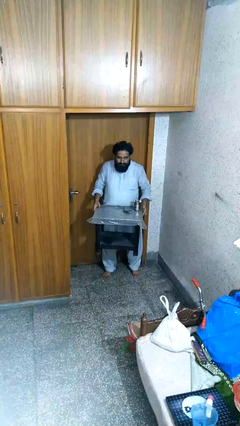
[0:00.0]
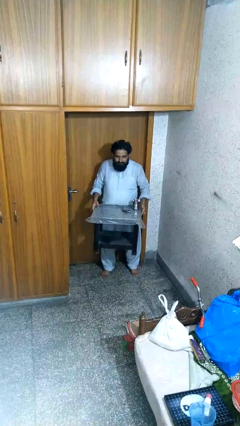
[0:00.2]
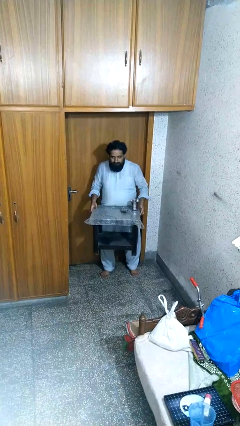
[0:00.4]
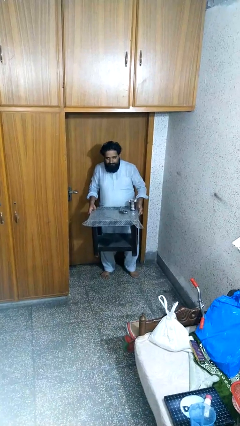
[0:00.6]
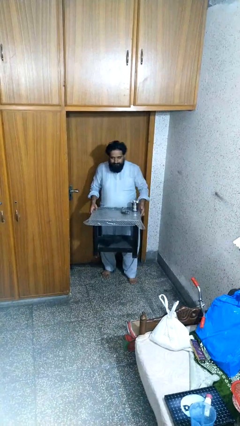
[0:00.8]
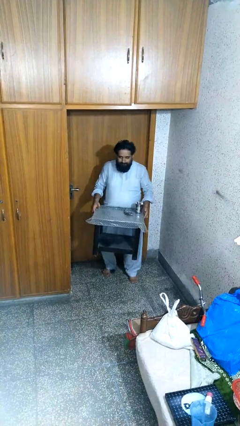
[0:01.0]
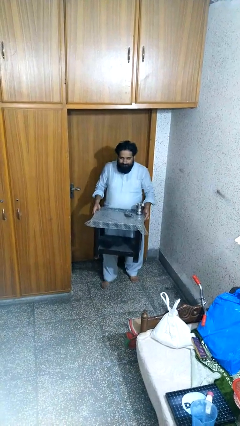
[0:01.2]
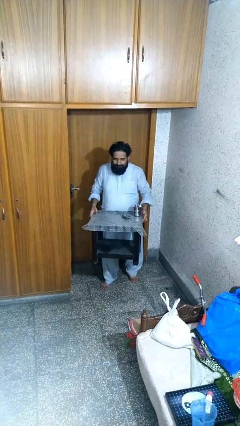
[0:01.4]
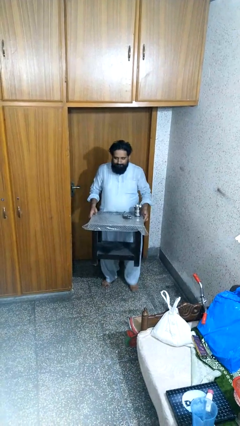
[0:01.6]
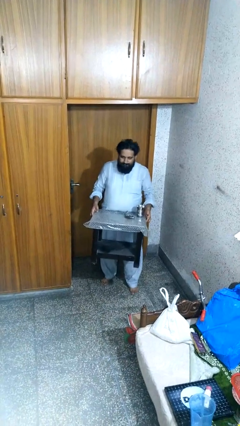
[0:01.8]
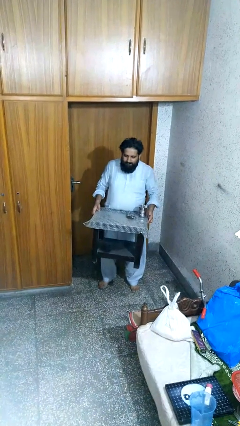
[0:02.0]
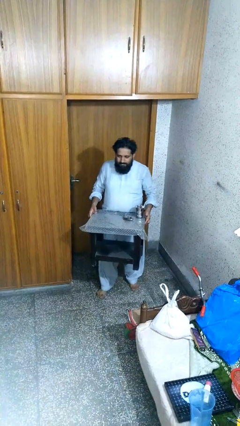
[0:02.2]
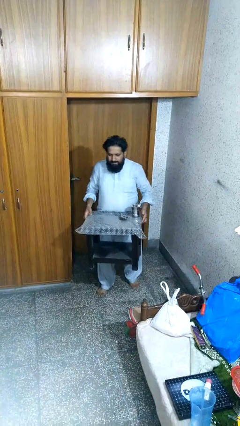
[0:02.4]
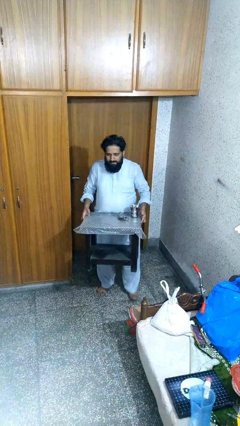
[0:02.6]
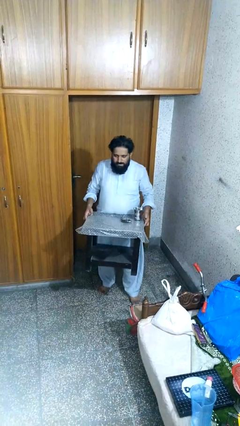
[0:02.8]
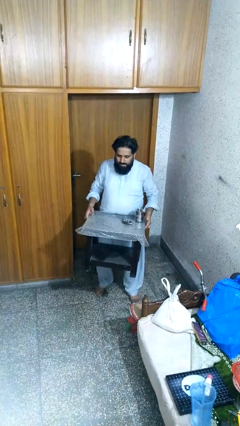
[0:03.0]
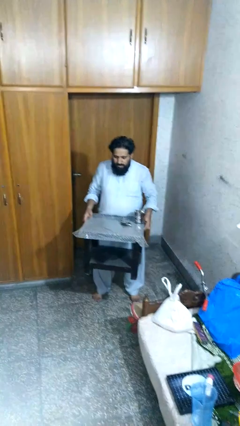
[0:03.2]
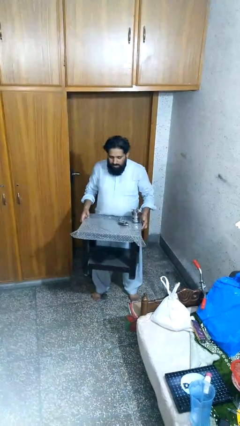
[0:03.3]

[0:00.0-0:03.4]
person carries furniture

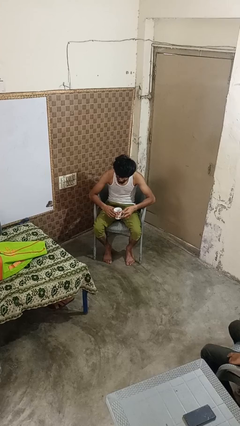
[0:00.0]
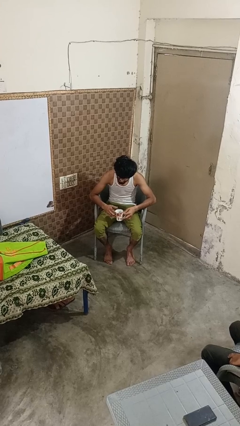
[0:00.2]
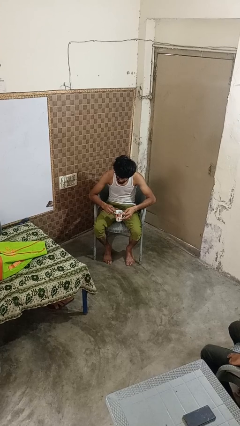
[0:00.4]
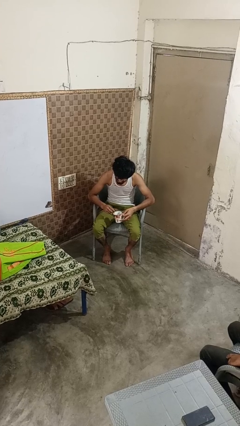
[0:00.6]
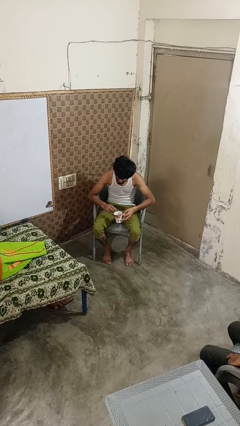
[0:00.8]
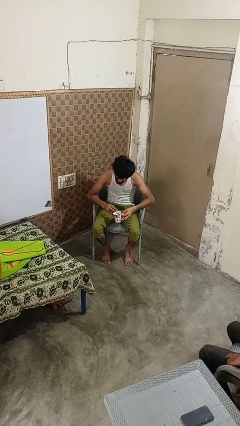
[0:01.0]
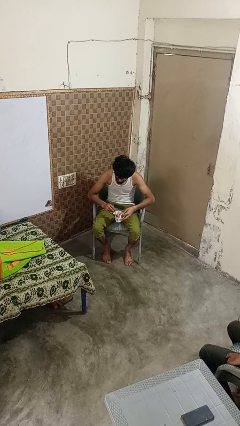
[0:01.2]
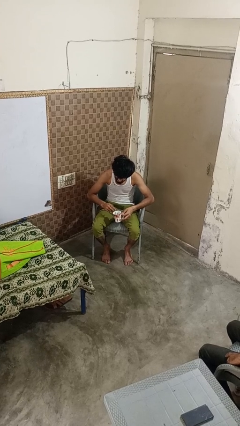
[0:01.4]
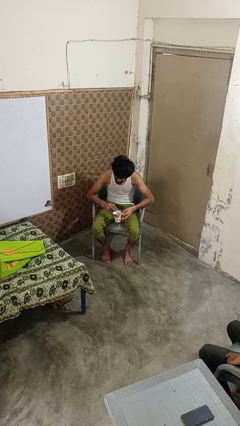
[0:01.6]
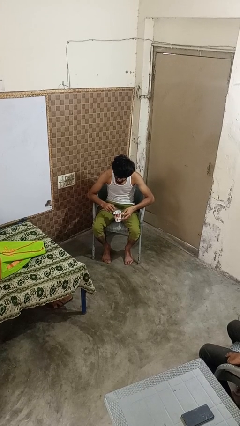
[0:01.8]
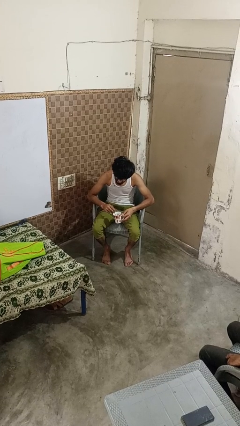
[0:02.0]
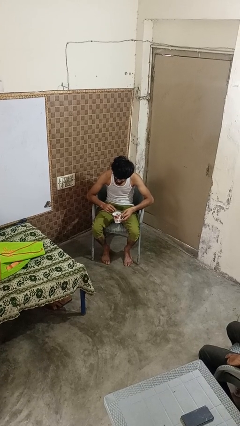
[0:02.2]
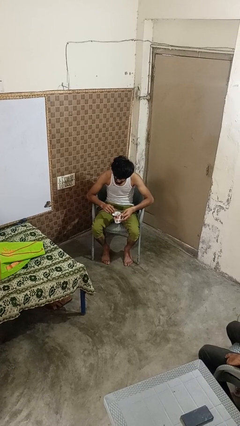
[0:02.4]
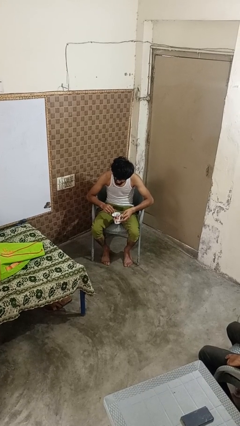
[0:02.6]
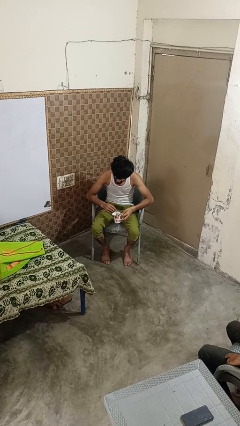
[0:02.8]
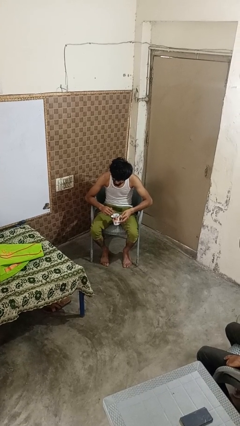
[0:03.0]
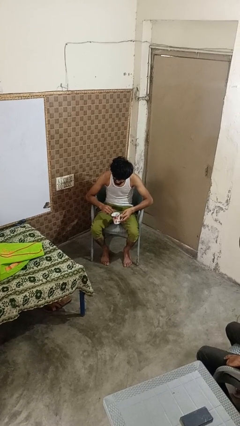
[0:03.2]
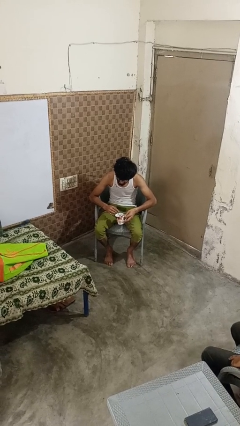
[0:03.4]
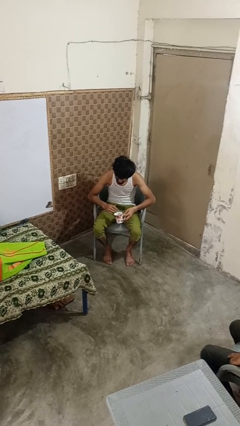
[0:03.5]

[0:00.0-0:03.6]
person stirs mug

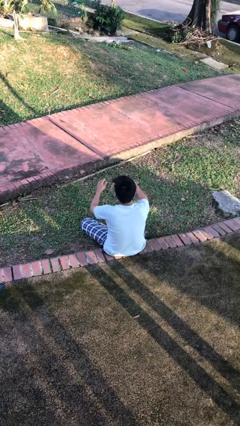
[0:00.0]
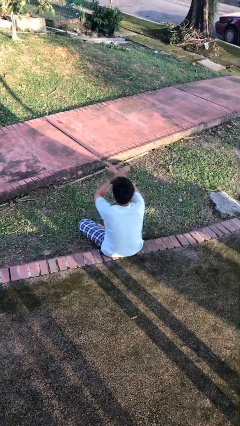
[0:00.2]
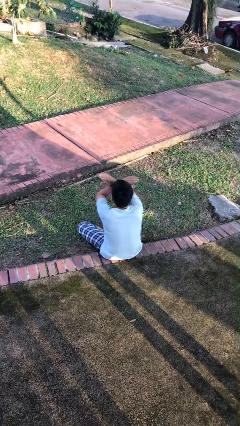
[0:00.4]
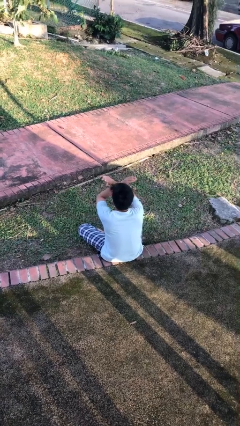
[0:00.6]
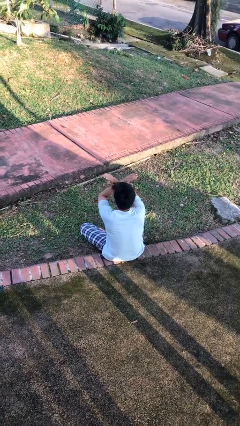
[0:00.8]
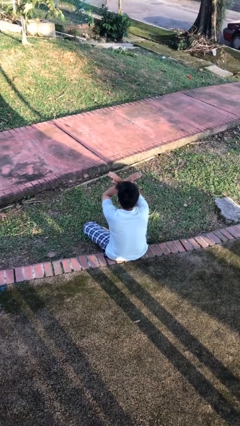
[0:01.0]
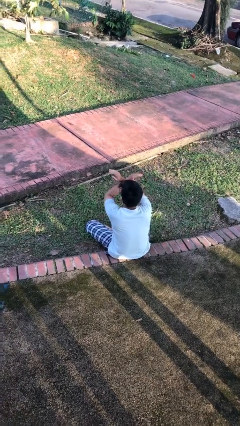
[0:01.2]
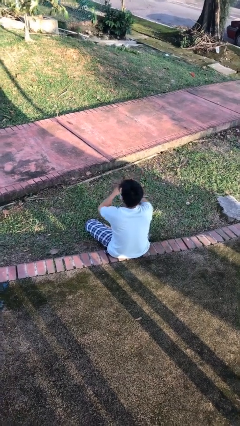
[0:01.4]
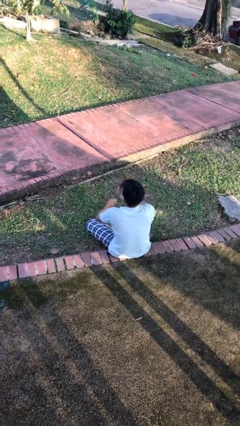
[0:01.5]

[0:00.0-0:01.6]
person gestures arms x

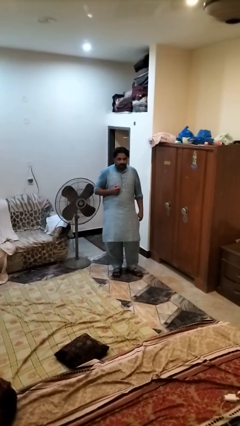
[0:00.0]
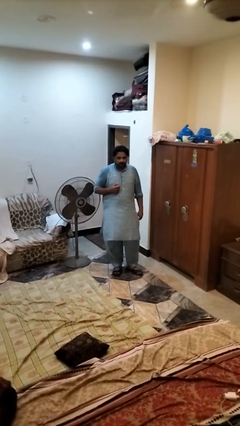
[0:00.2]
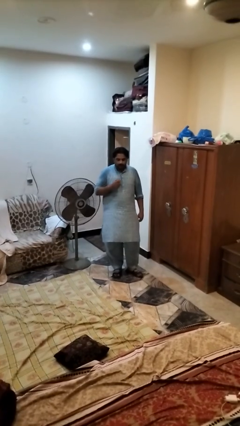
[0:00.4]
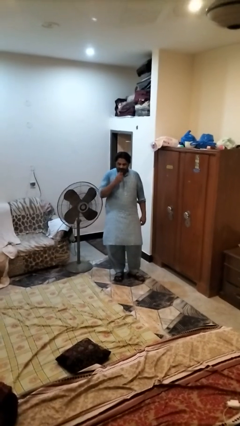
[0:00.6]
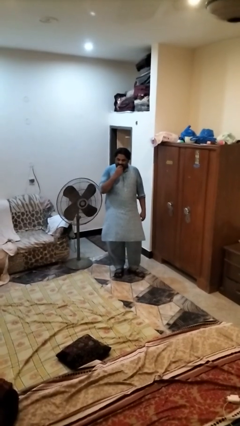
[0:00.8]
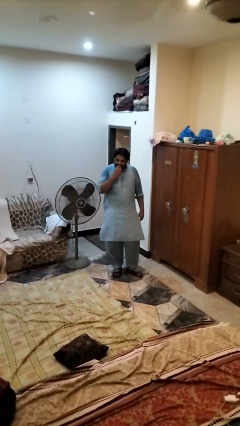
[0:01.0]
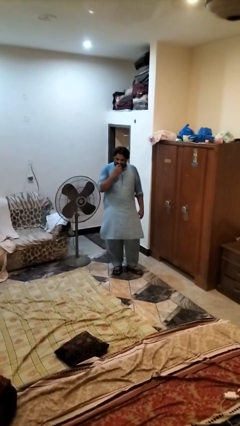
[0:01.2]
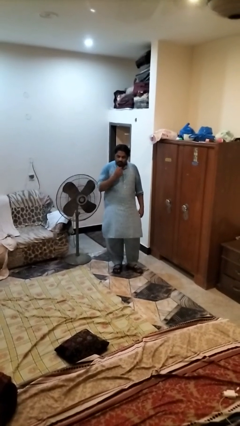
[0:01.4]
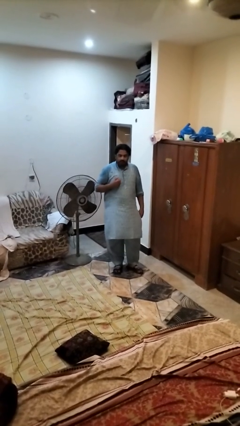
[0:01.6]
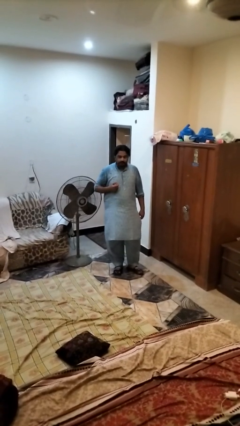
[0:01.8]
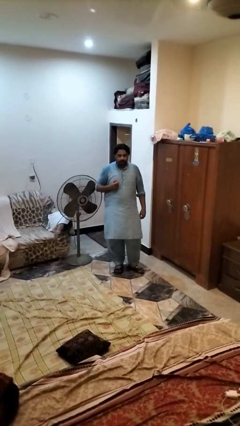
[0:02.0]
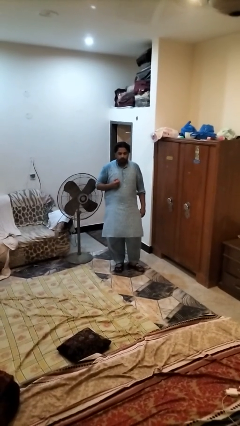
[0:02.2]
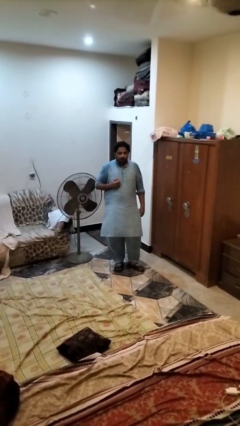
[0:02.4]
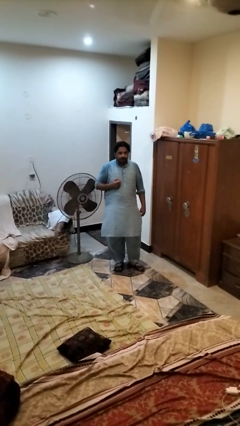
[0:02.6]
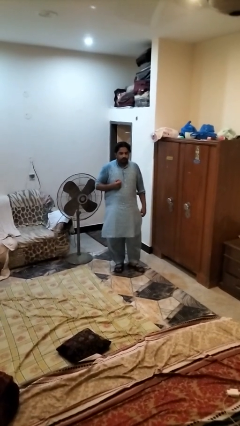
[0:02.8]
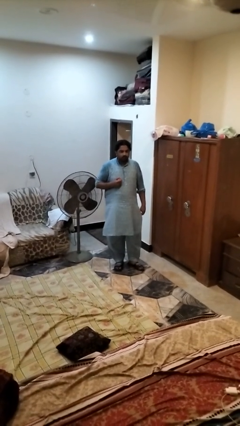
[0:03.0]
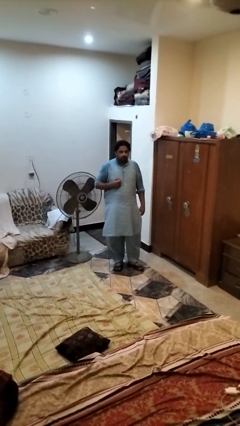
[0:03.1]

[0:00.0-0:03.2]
person eats apple

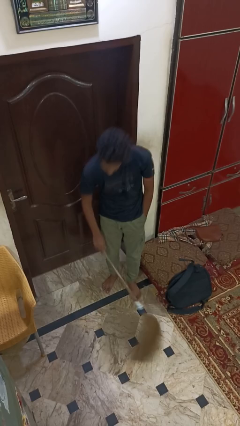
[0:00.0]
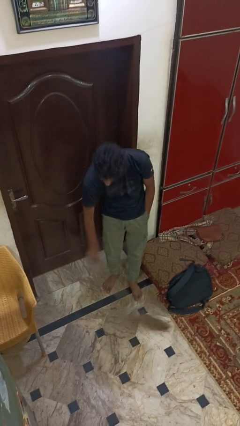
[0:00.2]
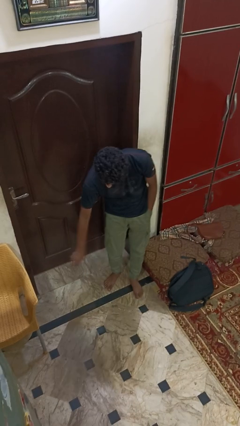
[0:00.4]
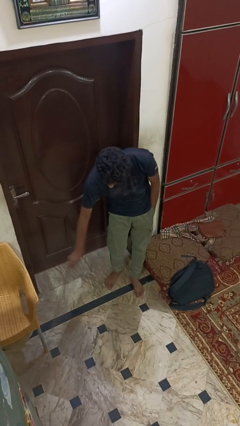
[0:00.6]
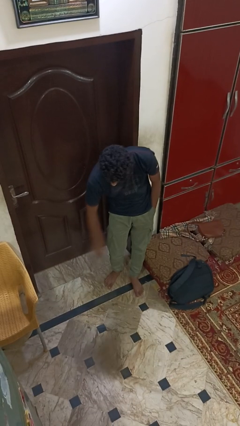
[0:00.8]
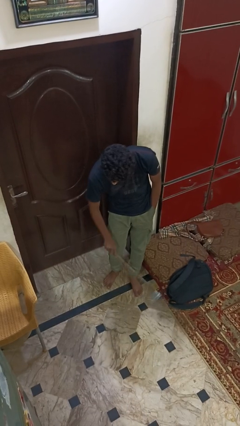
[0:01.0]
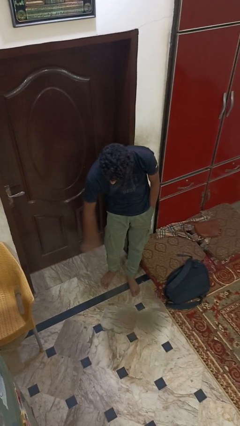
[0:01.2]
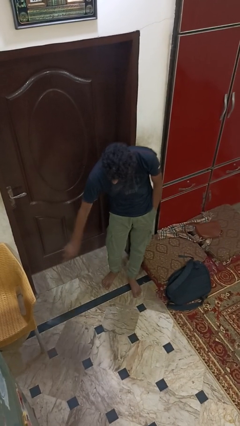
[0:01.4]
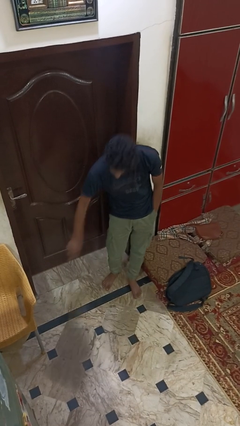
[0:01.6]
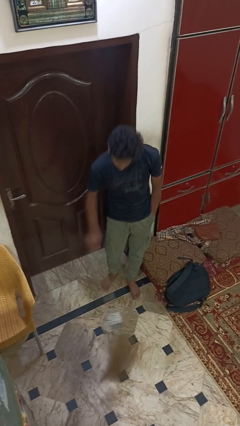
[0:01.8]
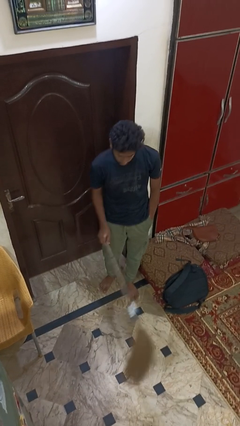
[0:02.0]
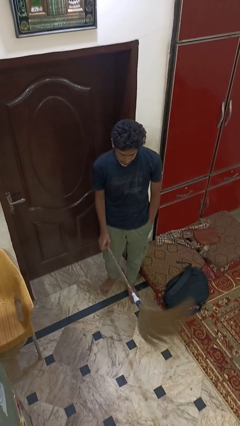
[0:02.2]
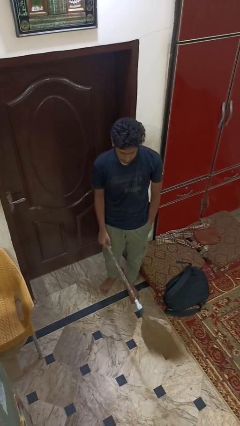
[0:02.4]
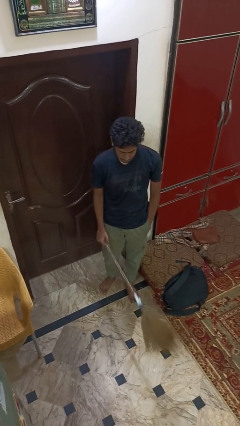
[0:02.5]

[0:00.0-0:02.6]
person sweeps floor

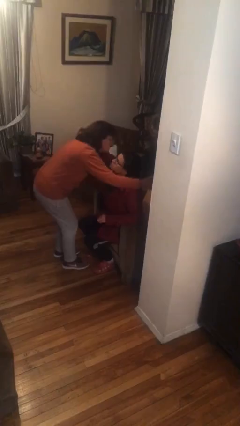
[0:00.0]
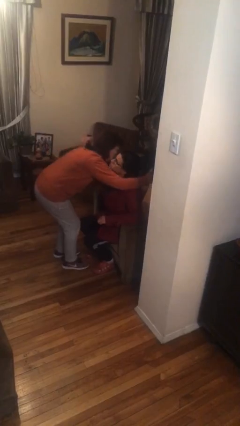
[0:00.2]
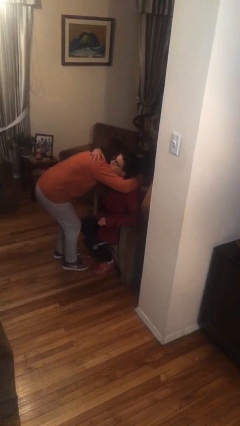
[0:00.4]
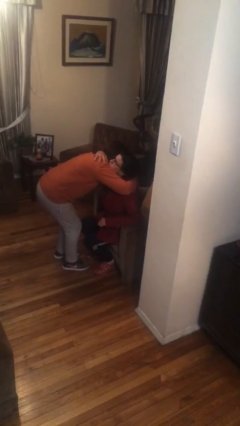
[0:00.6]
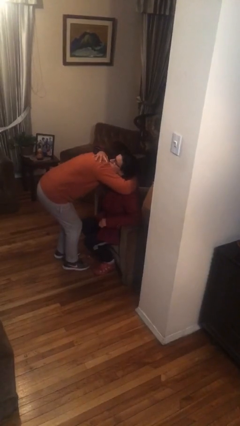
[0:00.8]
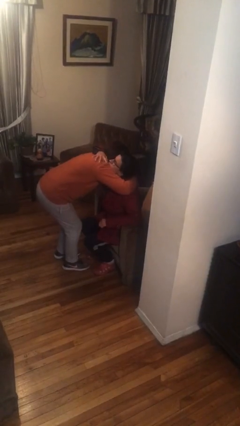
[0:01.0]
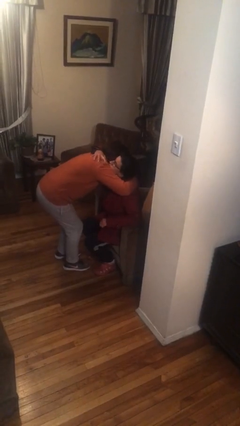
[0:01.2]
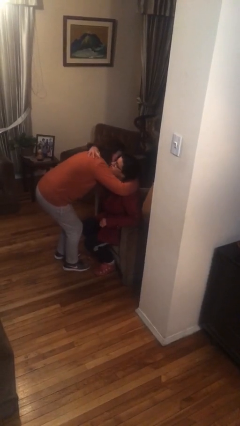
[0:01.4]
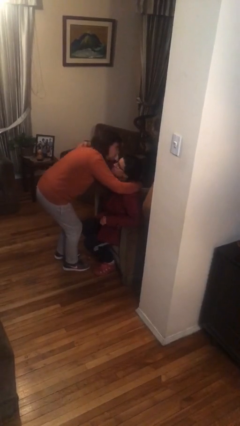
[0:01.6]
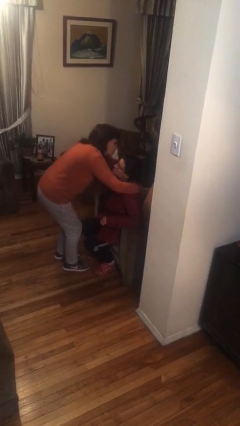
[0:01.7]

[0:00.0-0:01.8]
person embraces person

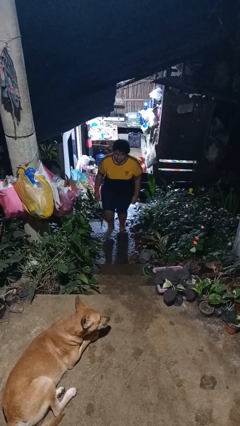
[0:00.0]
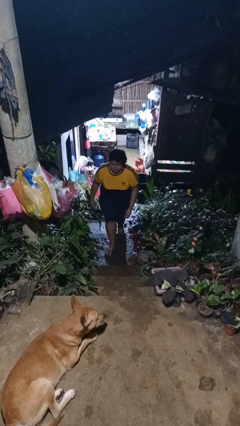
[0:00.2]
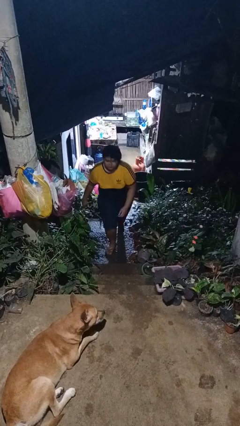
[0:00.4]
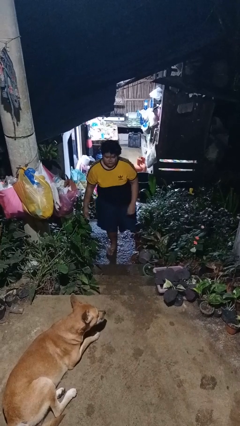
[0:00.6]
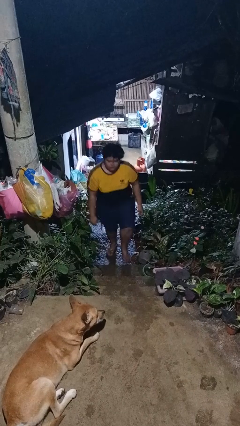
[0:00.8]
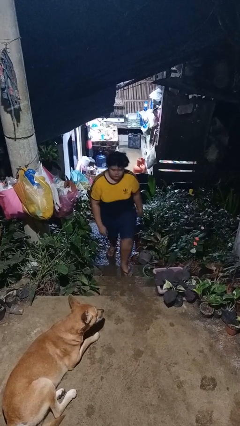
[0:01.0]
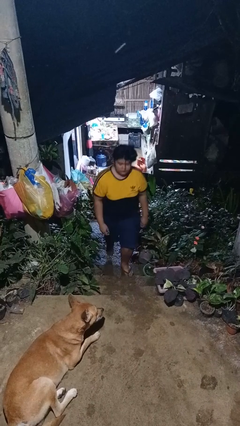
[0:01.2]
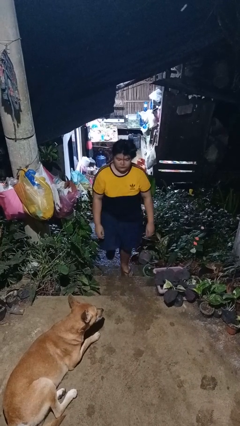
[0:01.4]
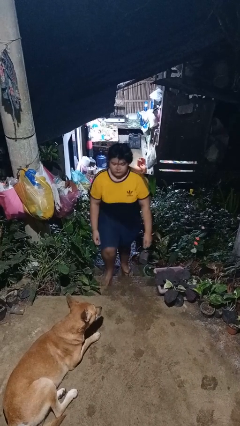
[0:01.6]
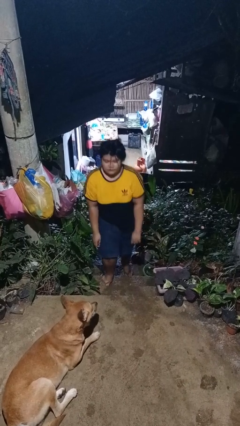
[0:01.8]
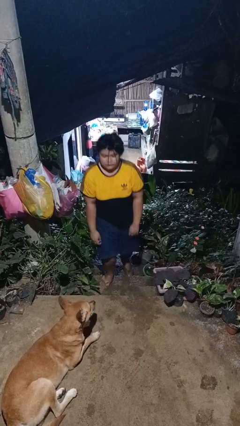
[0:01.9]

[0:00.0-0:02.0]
person climbs up stairs
